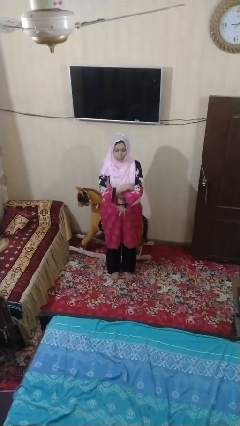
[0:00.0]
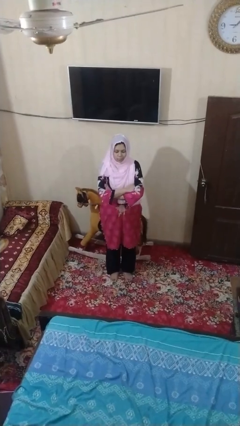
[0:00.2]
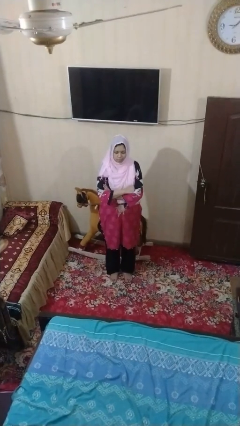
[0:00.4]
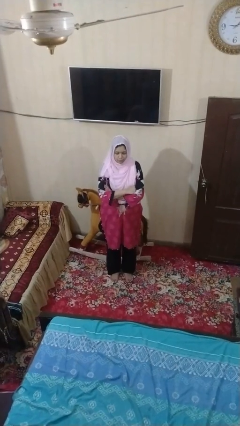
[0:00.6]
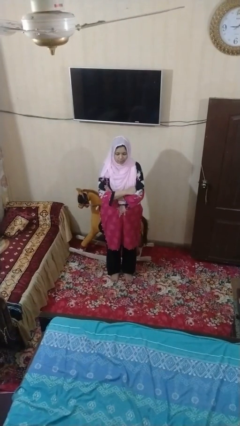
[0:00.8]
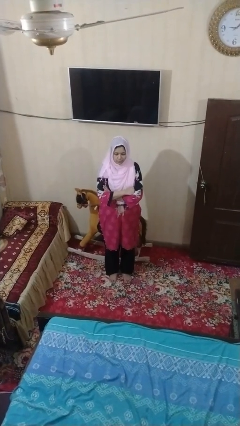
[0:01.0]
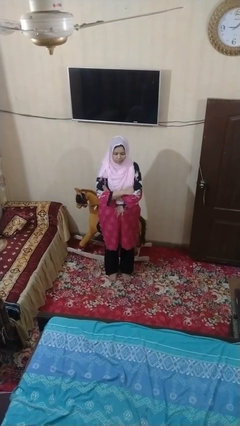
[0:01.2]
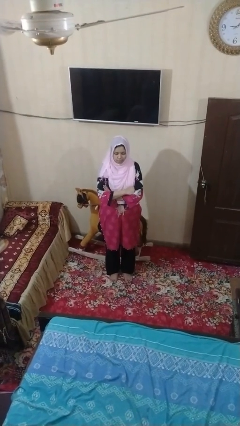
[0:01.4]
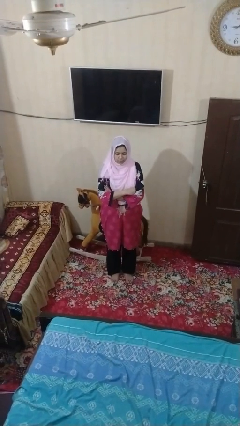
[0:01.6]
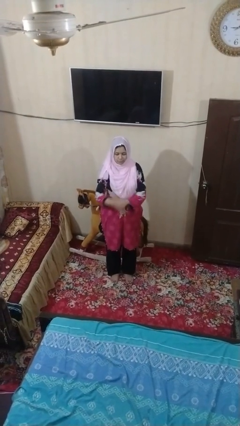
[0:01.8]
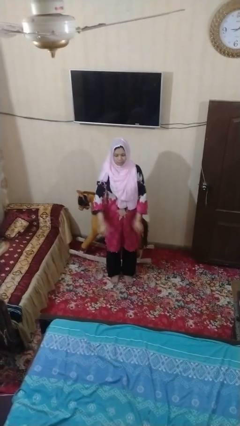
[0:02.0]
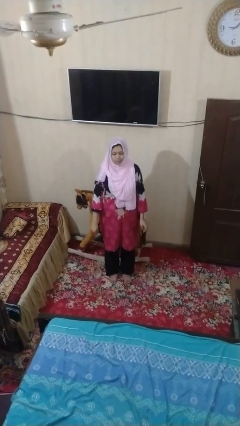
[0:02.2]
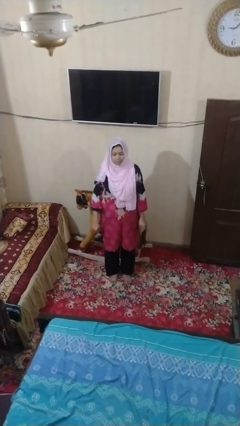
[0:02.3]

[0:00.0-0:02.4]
person crosses arms

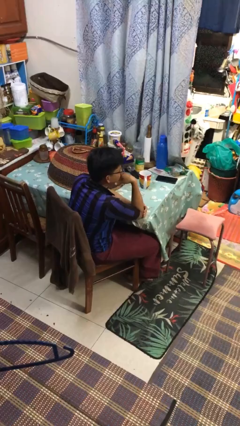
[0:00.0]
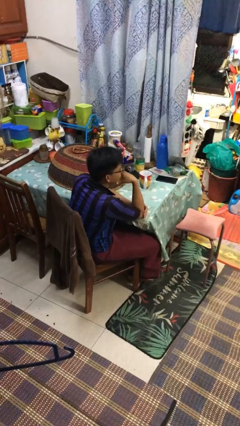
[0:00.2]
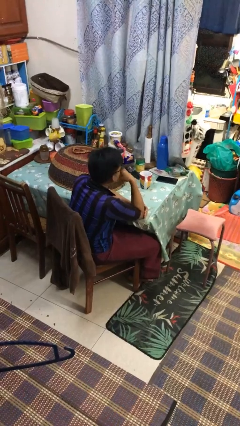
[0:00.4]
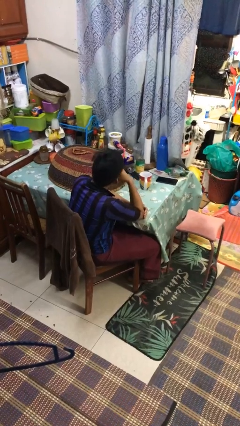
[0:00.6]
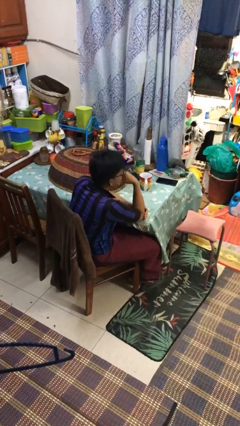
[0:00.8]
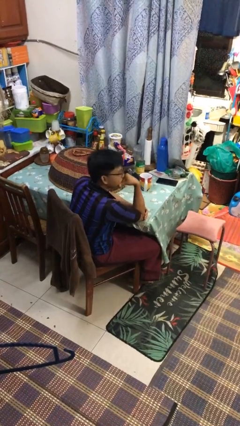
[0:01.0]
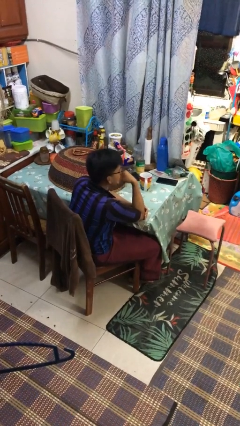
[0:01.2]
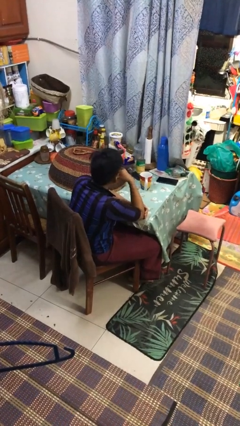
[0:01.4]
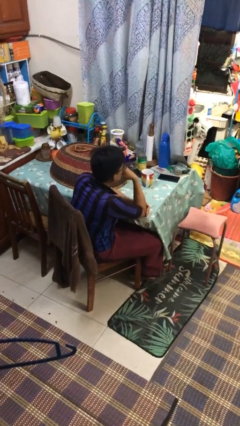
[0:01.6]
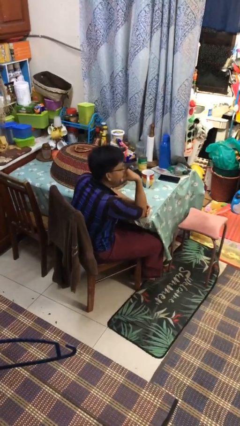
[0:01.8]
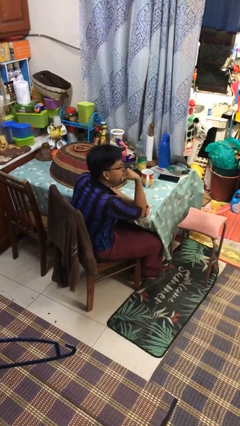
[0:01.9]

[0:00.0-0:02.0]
person shakes head

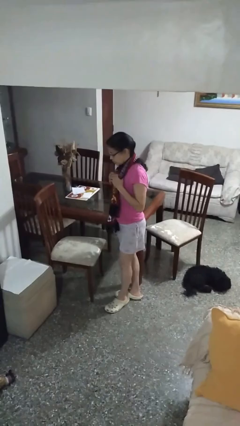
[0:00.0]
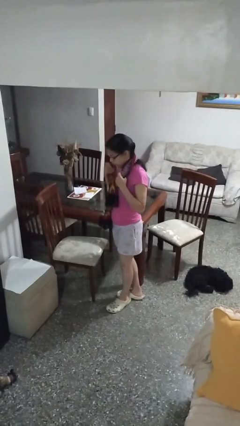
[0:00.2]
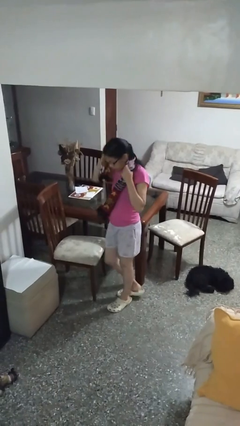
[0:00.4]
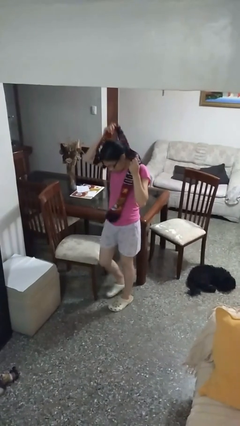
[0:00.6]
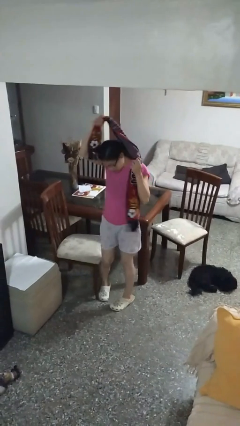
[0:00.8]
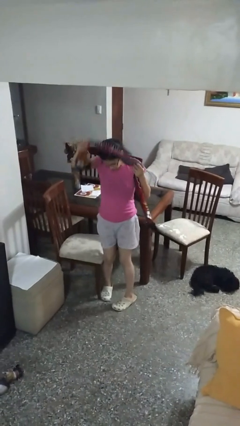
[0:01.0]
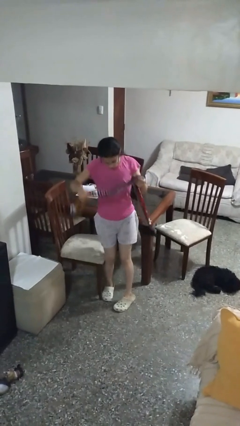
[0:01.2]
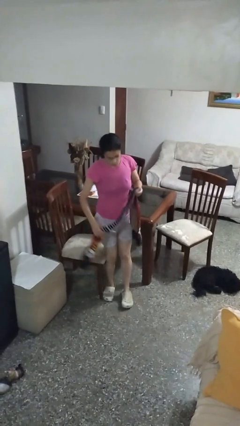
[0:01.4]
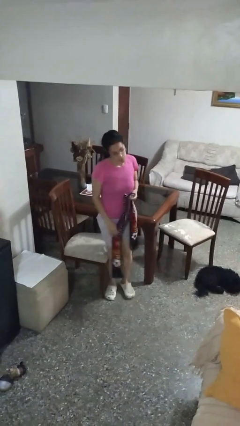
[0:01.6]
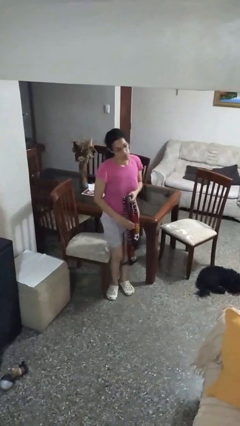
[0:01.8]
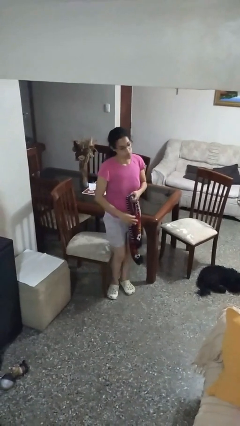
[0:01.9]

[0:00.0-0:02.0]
person takes off scarf

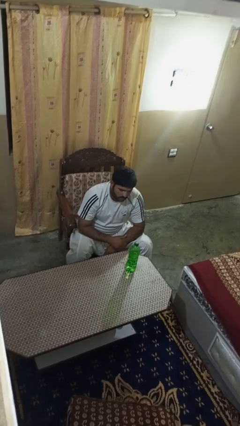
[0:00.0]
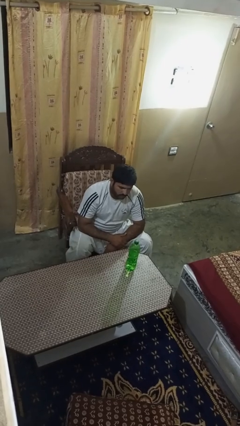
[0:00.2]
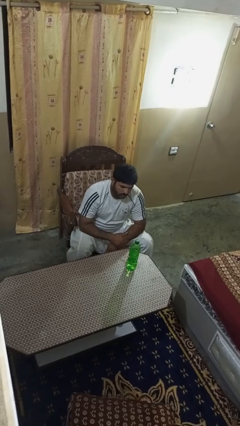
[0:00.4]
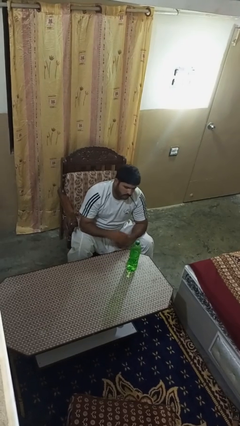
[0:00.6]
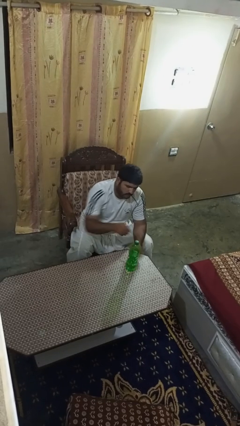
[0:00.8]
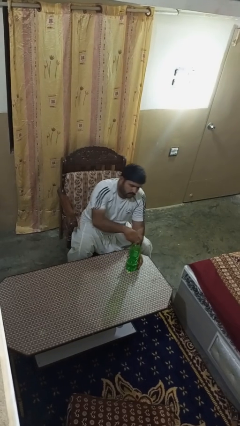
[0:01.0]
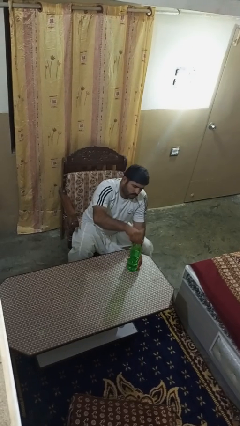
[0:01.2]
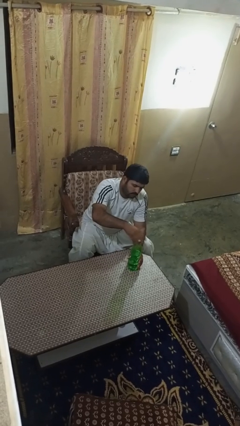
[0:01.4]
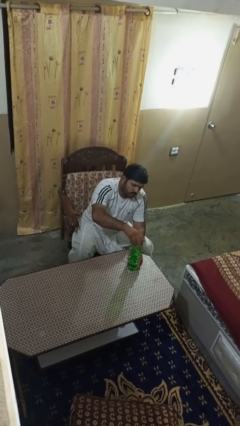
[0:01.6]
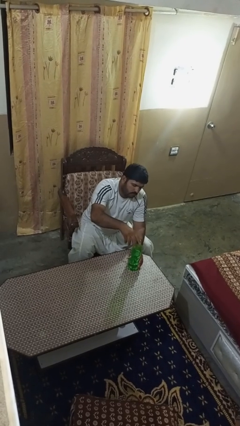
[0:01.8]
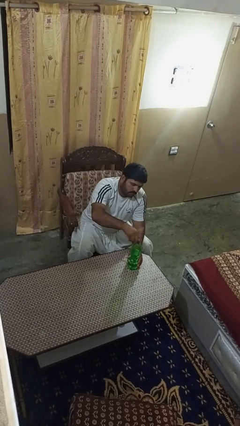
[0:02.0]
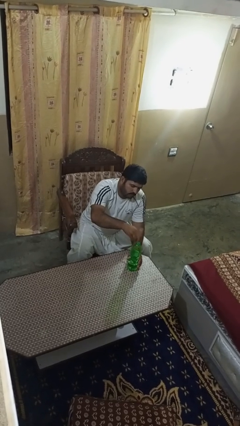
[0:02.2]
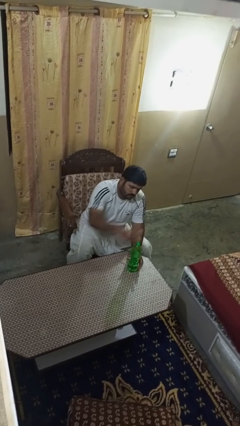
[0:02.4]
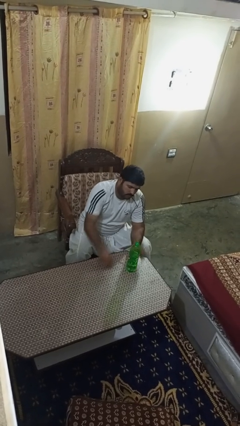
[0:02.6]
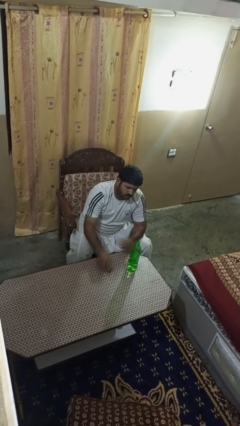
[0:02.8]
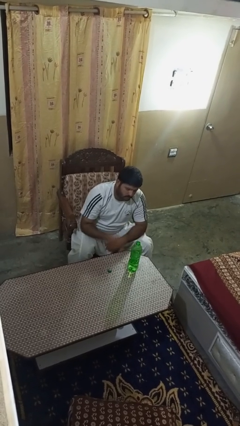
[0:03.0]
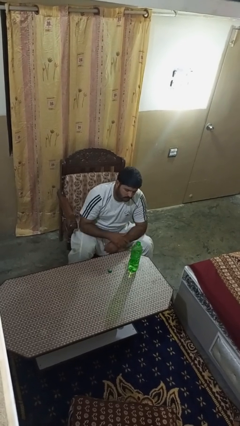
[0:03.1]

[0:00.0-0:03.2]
person unscrews lid from bottle

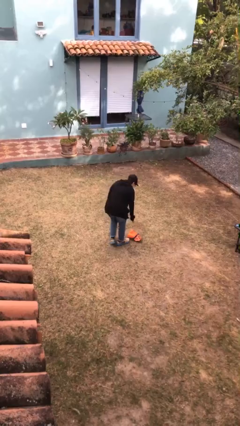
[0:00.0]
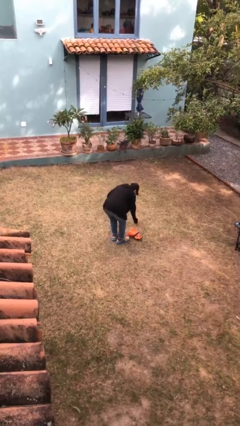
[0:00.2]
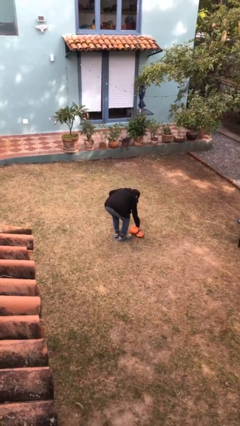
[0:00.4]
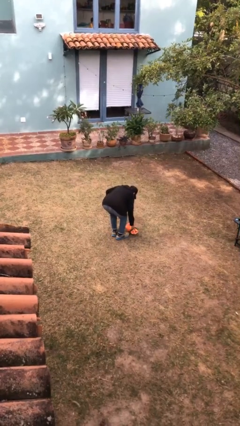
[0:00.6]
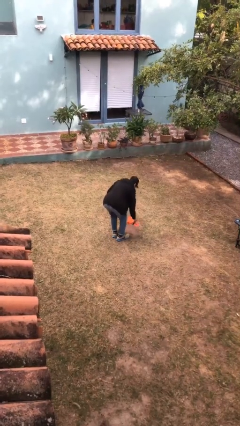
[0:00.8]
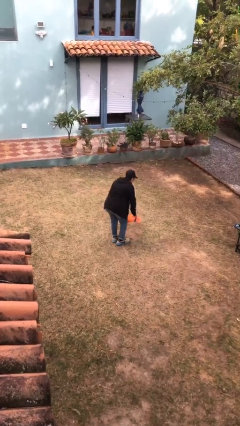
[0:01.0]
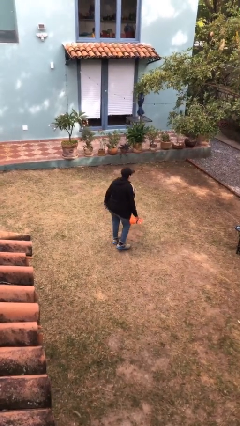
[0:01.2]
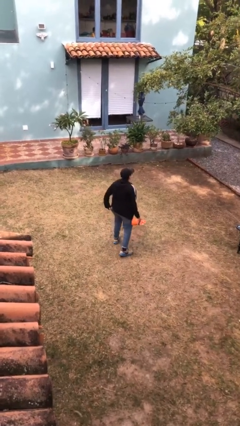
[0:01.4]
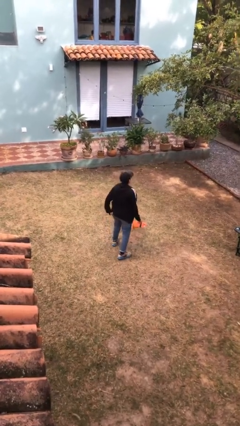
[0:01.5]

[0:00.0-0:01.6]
person picks up object from floor

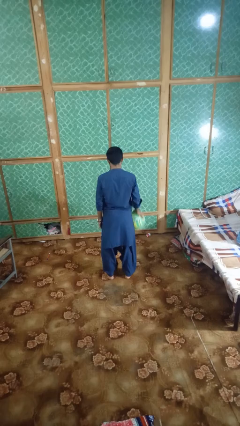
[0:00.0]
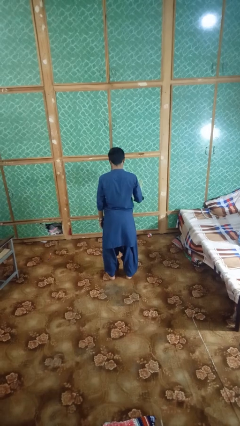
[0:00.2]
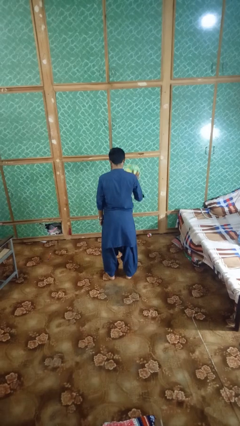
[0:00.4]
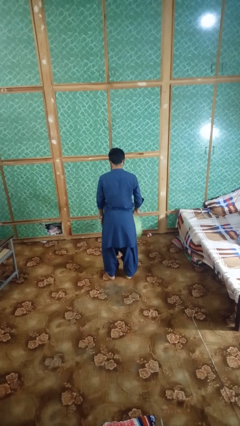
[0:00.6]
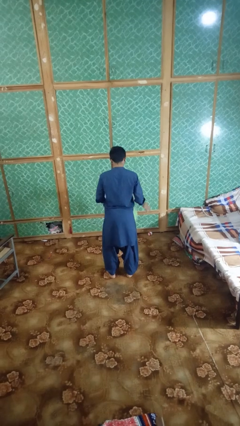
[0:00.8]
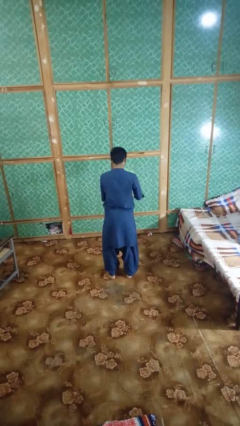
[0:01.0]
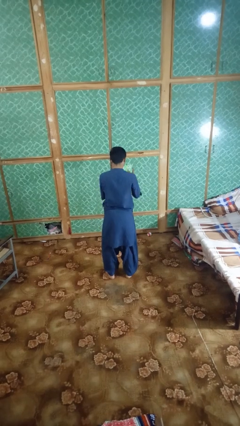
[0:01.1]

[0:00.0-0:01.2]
person bounces ball on floor

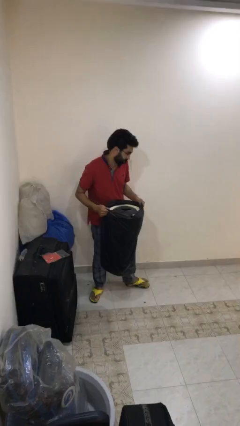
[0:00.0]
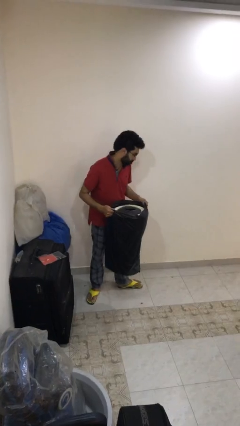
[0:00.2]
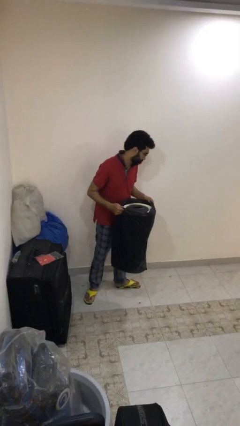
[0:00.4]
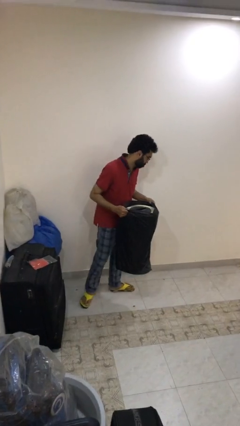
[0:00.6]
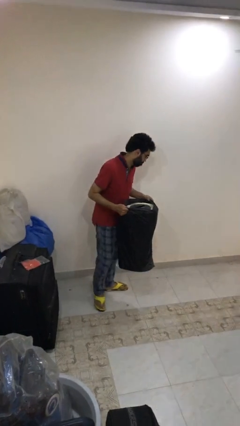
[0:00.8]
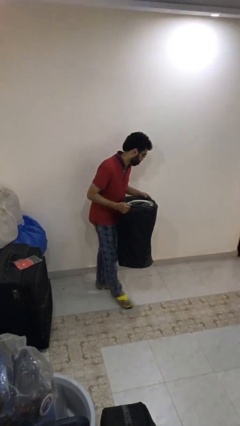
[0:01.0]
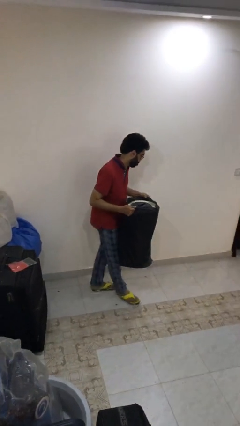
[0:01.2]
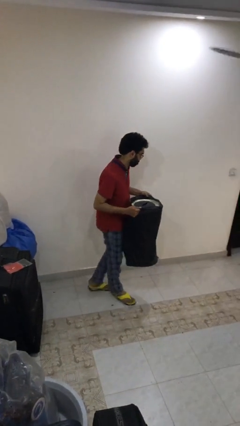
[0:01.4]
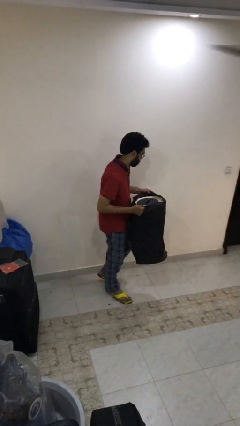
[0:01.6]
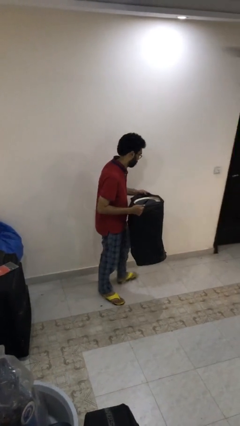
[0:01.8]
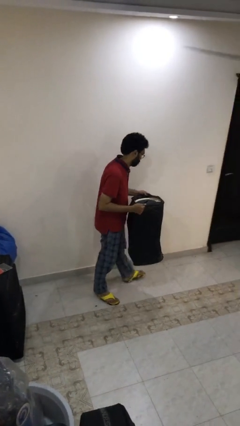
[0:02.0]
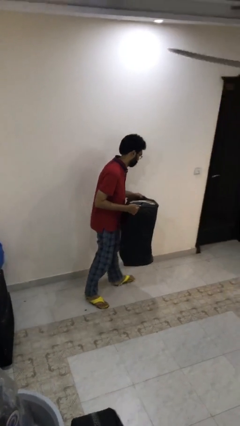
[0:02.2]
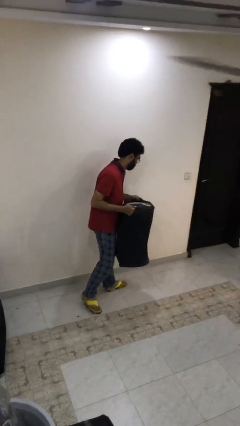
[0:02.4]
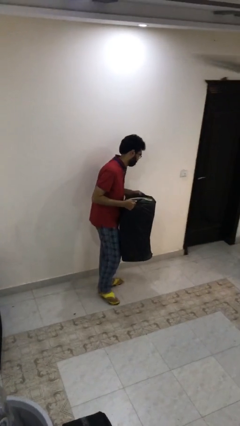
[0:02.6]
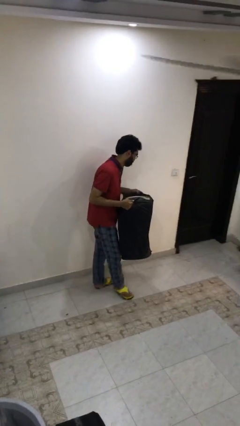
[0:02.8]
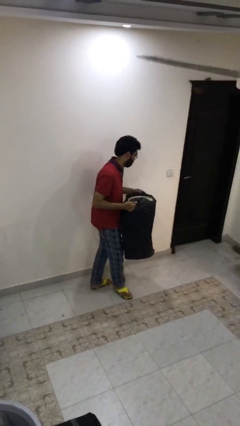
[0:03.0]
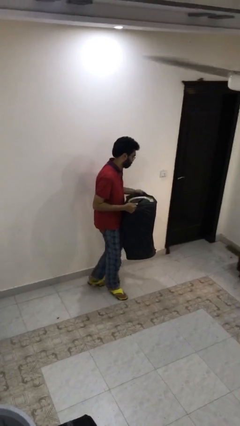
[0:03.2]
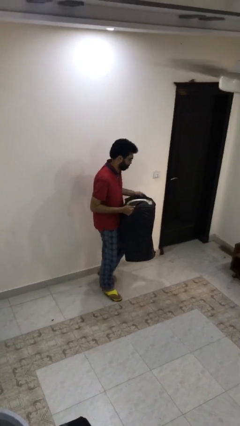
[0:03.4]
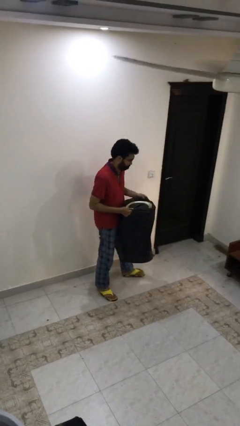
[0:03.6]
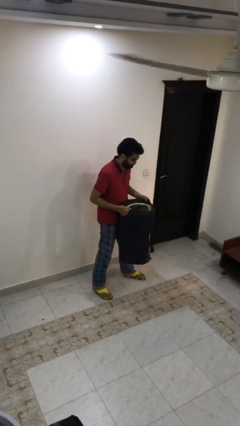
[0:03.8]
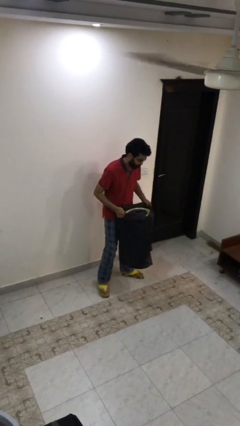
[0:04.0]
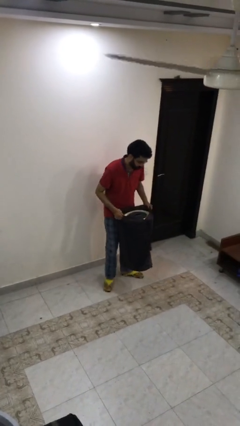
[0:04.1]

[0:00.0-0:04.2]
person carries heavy object

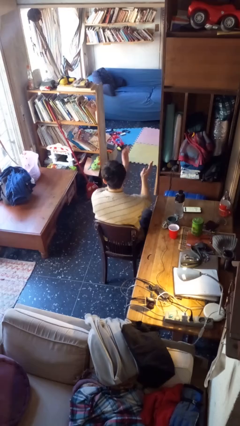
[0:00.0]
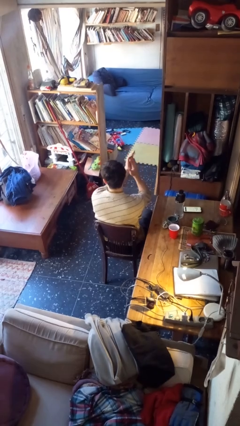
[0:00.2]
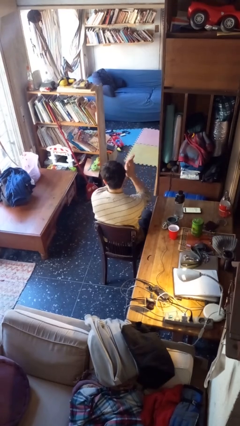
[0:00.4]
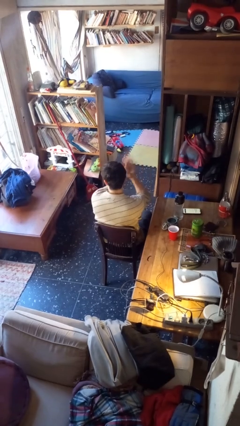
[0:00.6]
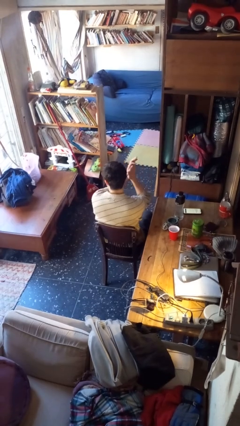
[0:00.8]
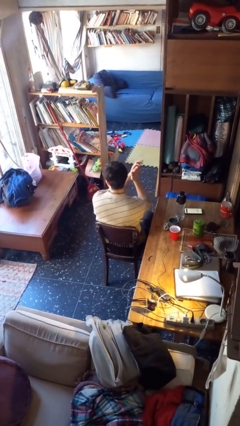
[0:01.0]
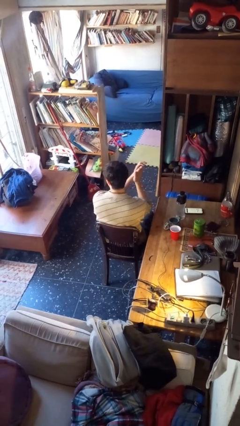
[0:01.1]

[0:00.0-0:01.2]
person claps hands
